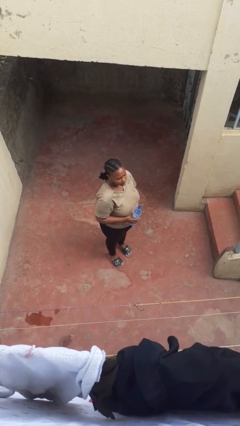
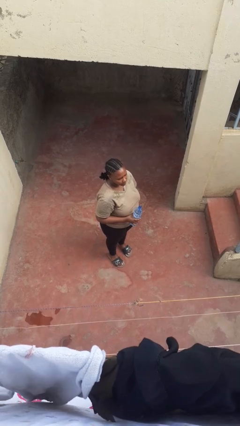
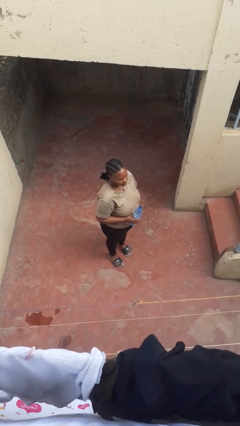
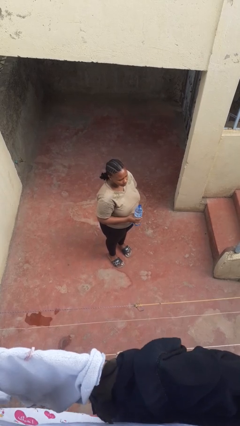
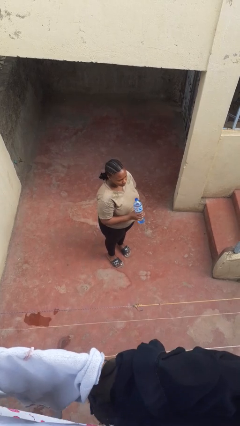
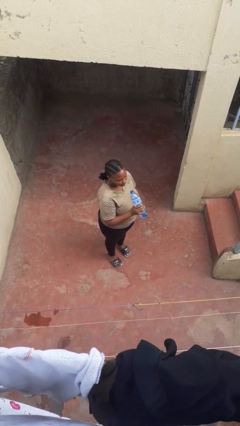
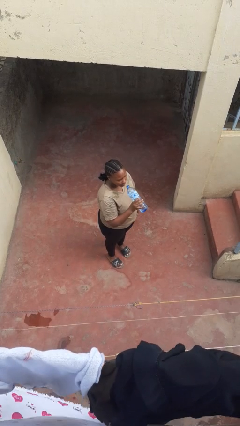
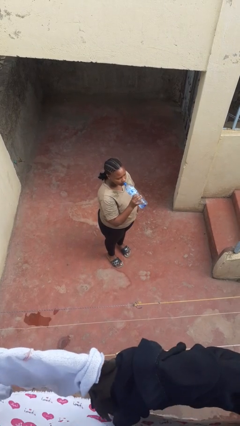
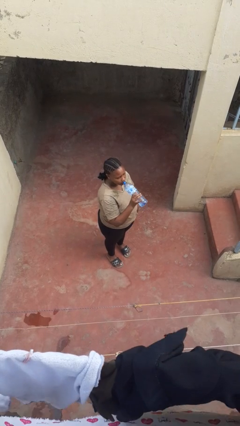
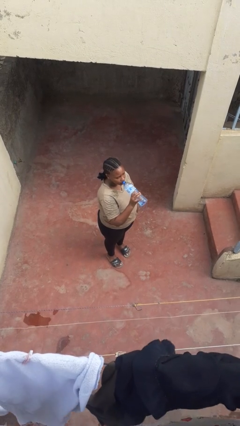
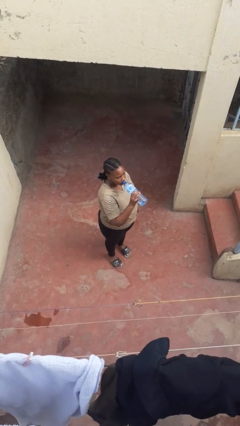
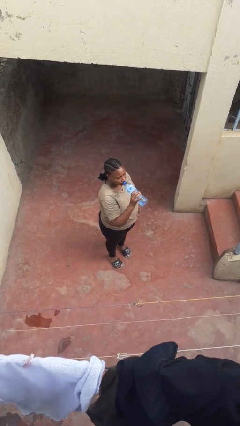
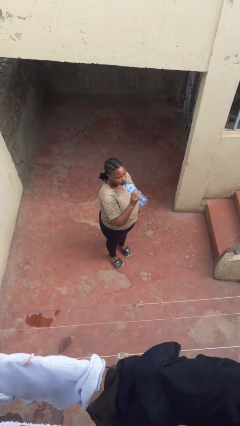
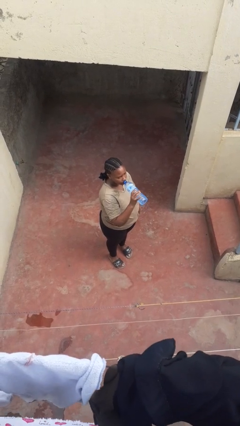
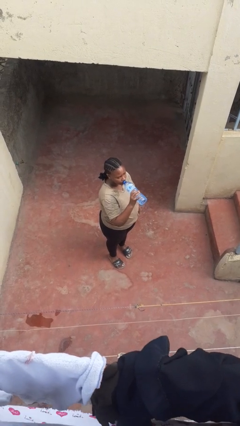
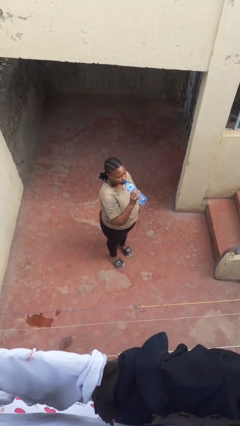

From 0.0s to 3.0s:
person drinks from bottle

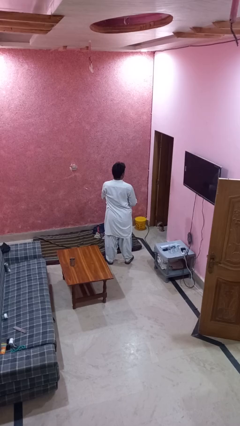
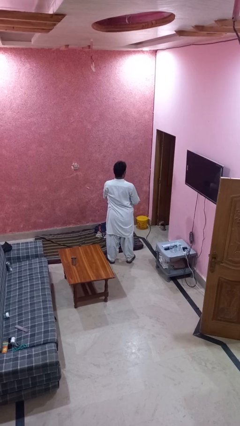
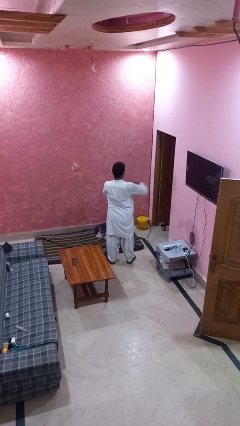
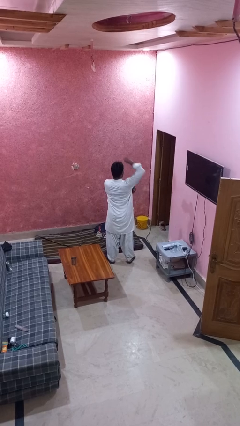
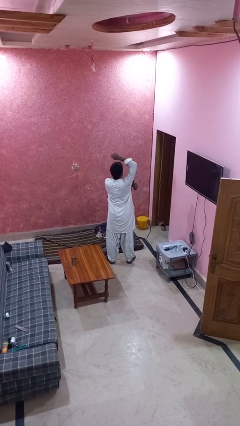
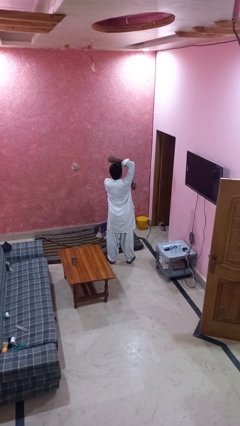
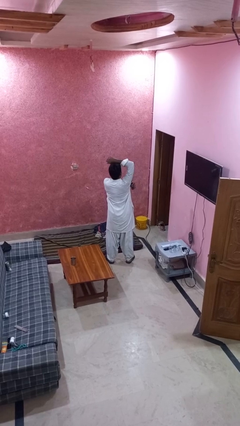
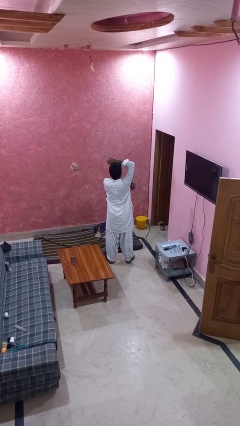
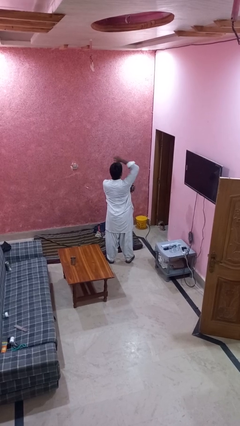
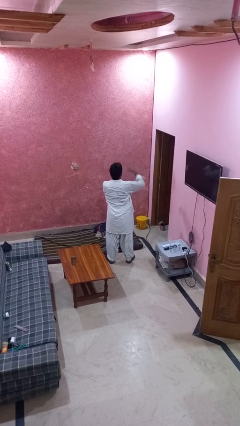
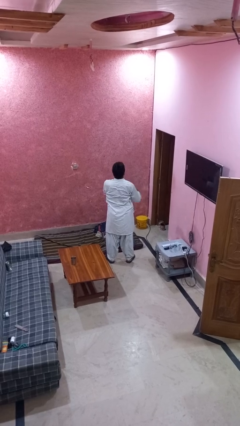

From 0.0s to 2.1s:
person applies deodorant

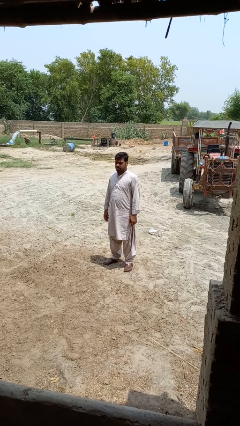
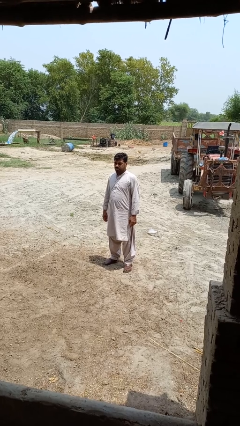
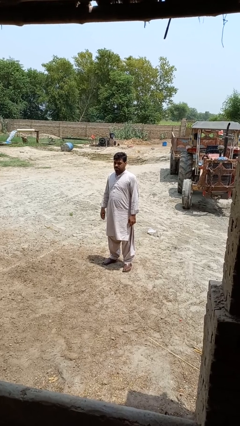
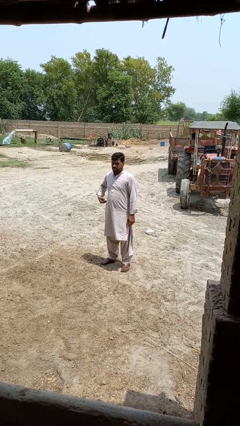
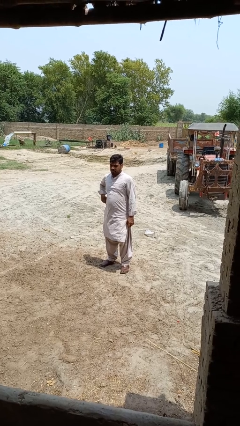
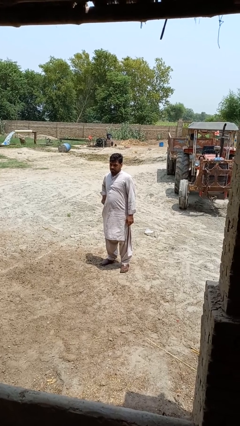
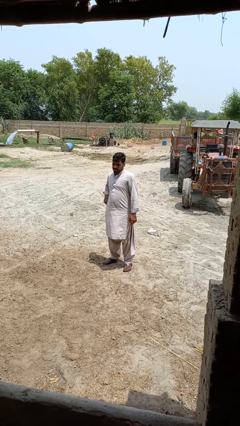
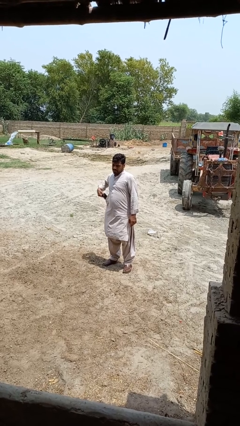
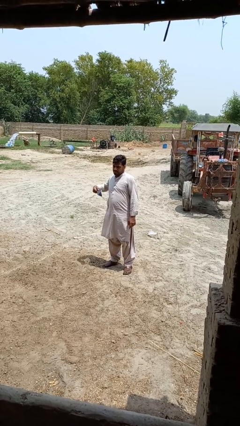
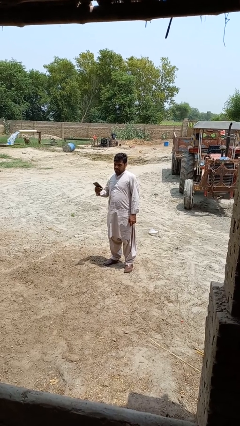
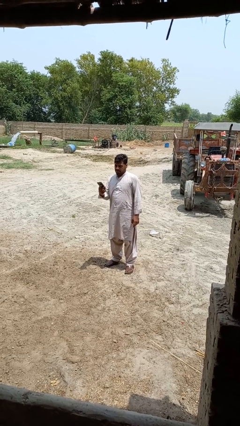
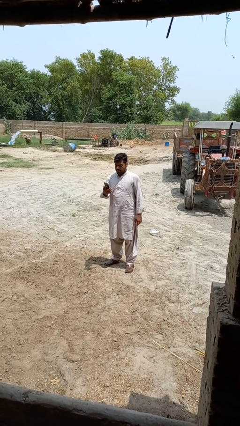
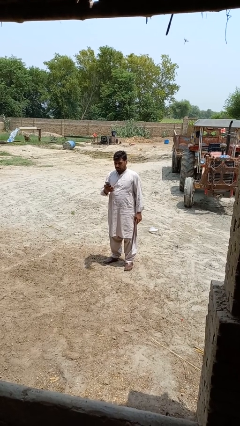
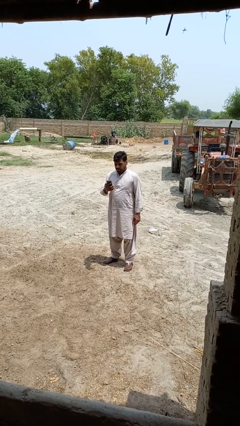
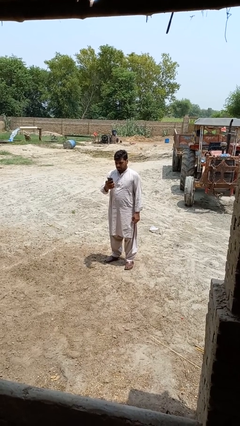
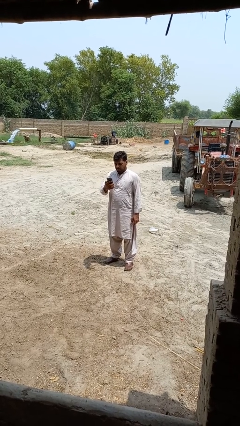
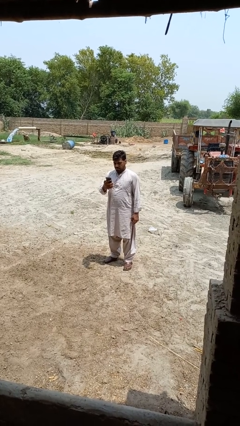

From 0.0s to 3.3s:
person takes phone from pocket

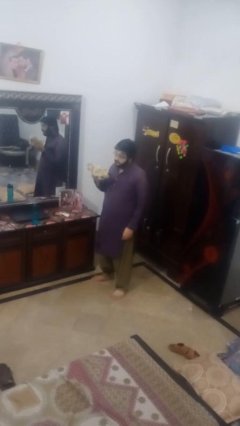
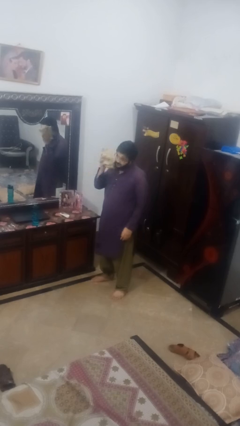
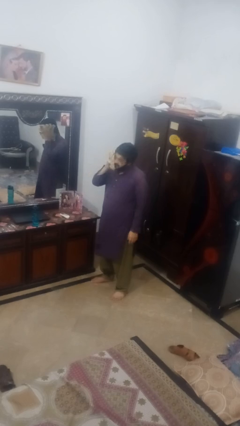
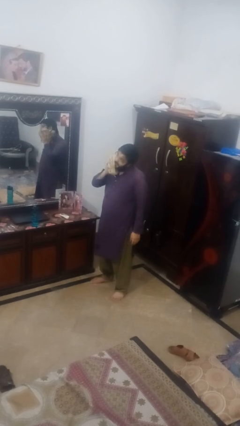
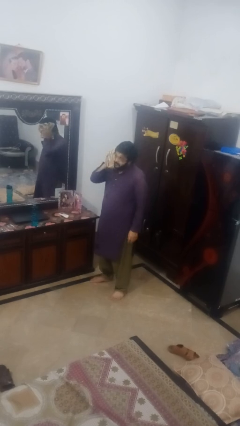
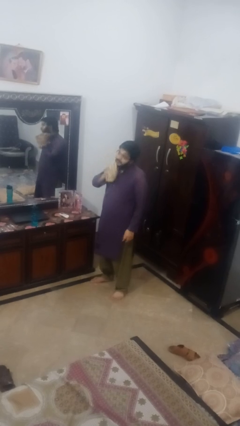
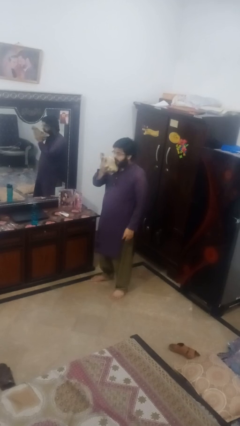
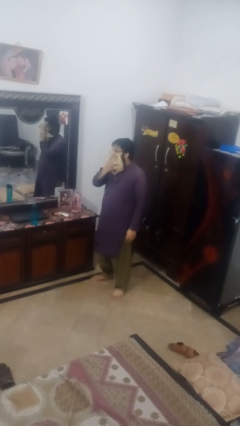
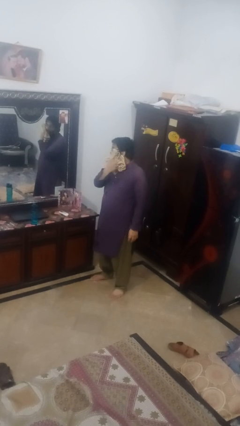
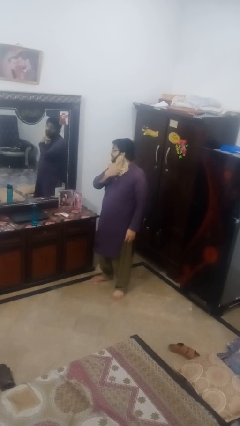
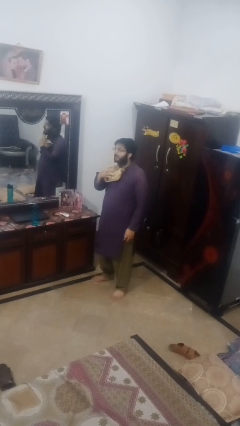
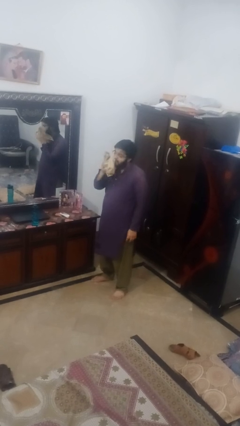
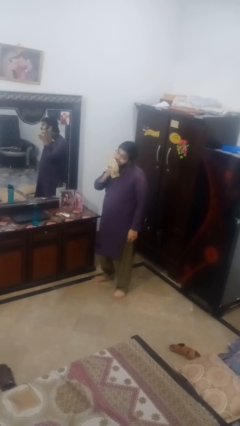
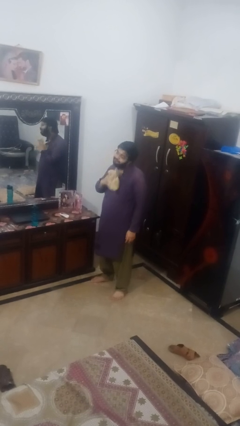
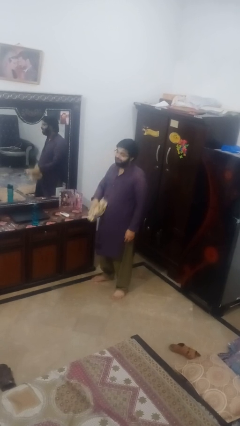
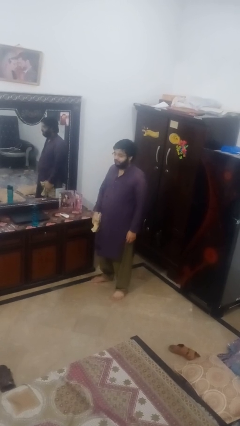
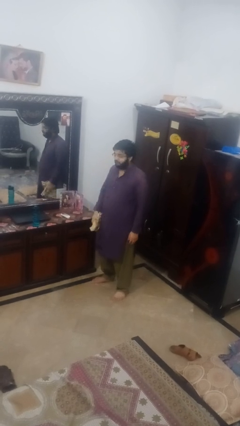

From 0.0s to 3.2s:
person wipes mouth with napkin

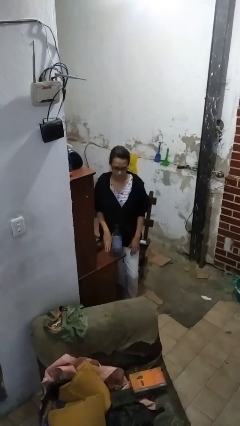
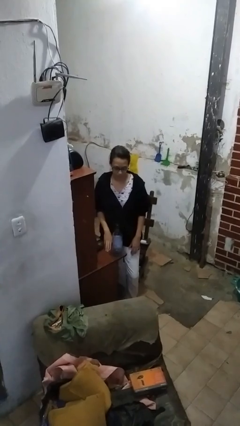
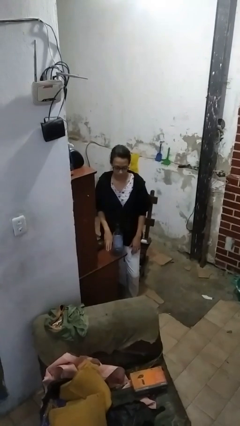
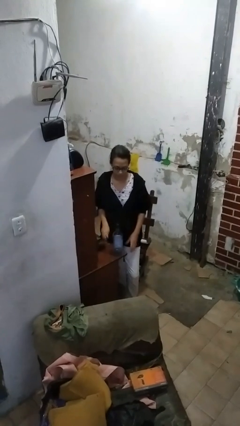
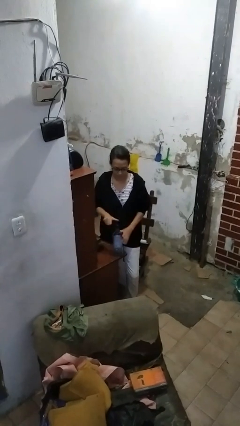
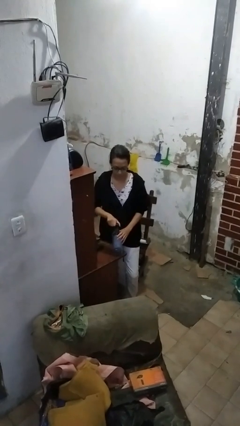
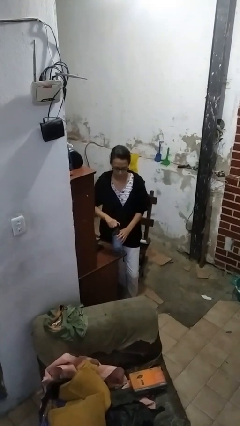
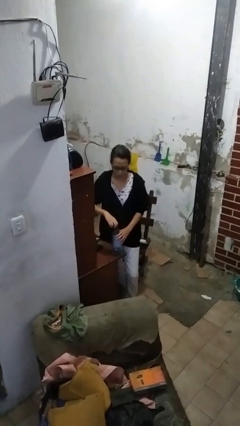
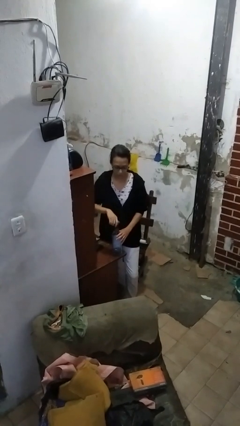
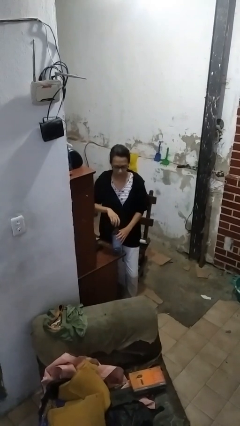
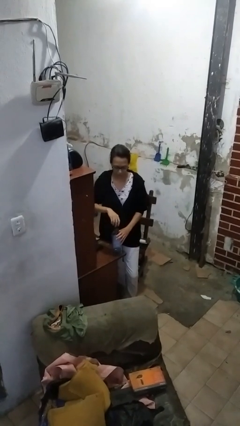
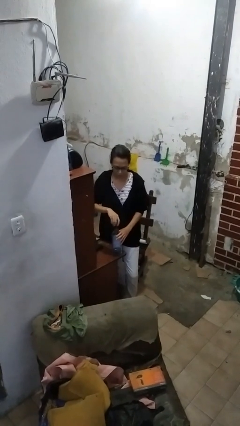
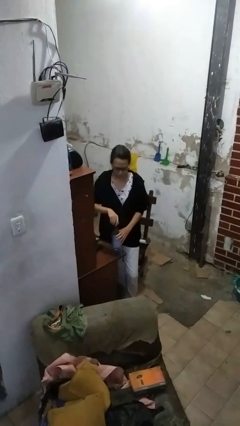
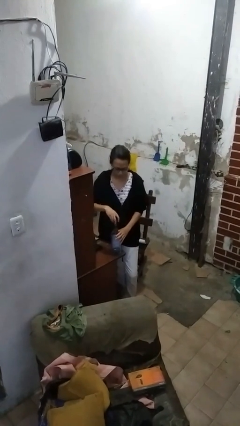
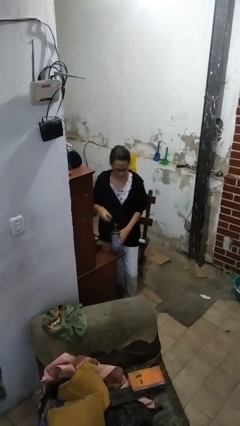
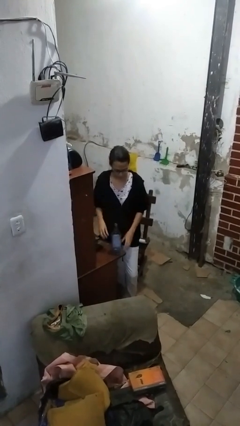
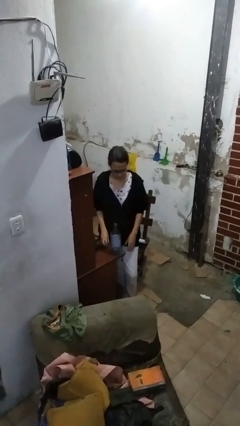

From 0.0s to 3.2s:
person unscrews lid from bottle

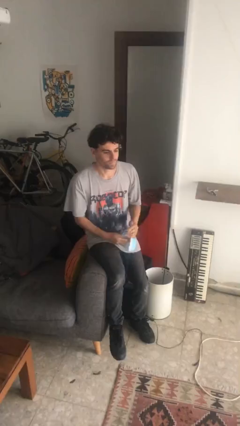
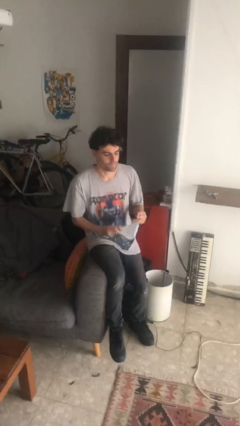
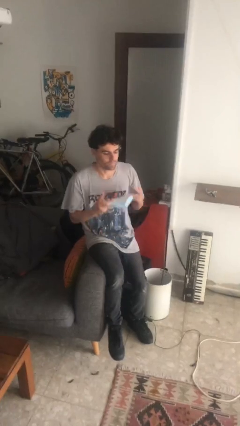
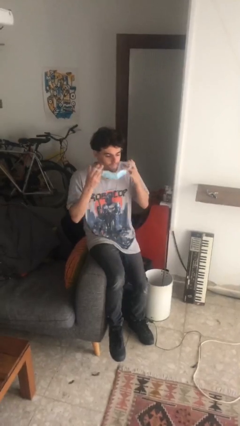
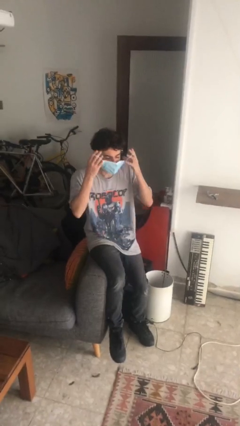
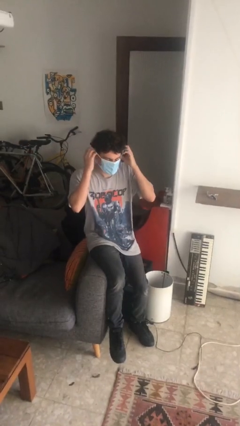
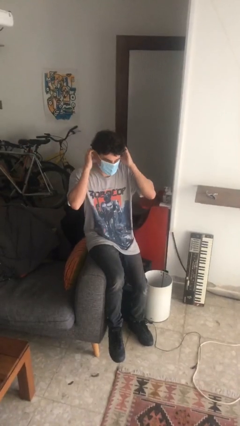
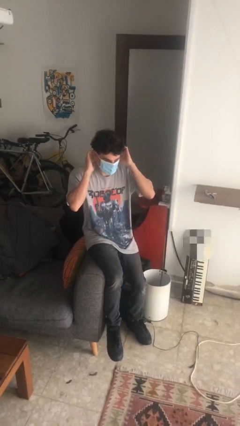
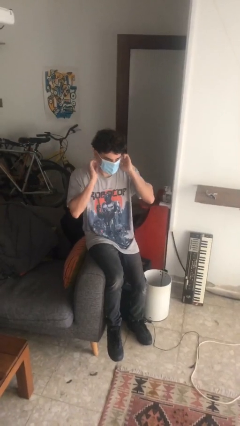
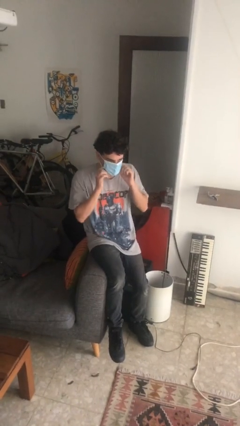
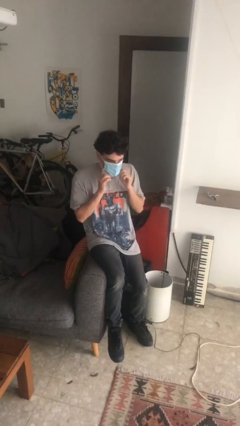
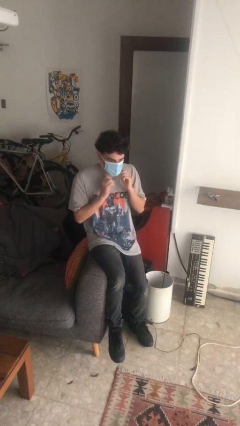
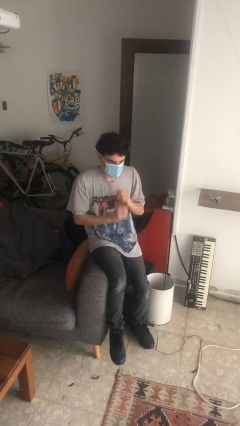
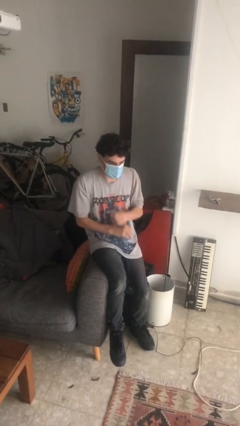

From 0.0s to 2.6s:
person puts on facemask
